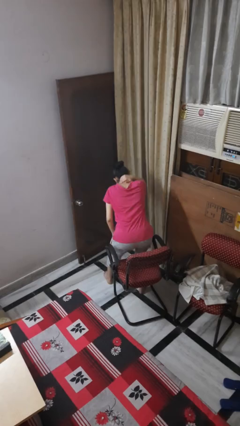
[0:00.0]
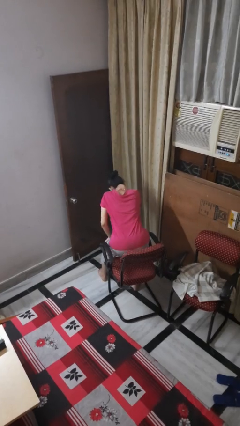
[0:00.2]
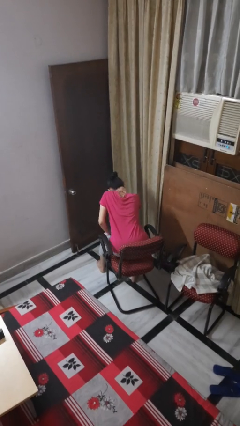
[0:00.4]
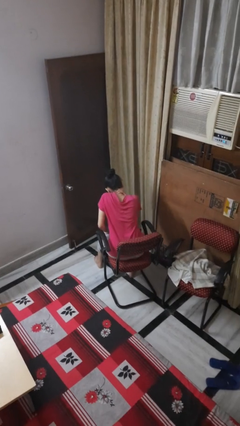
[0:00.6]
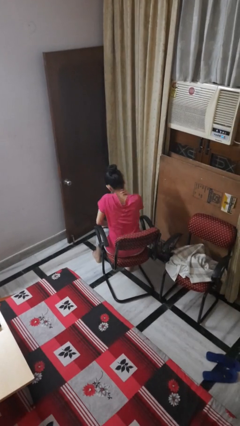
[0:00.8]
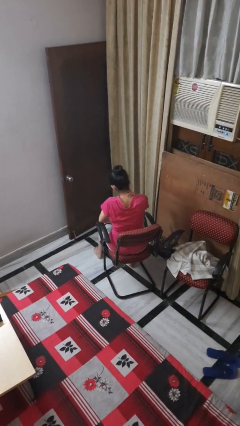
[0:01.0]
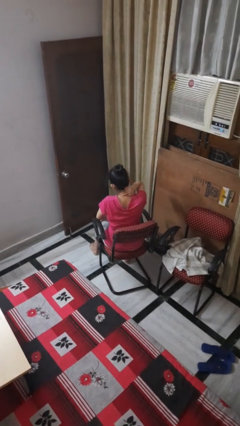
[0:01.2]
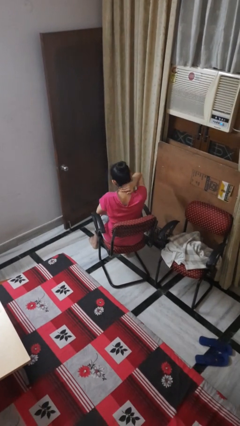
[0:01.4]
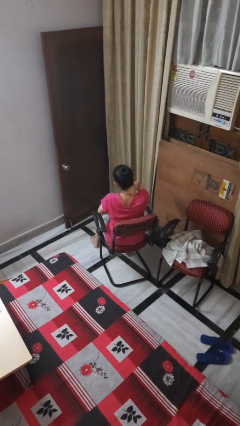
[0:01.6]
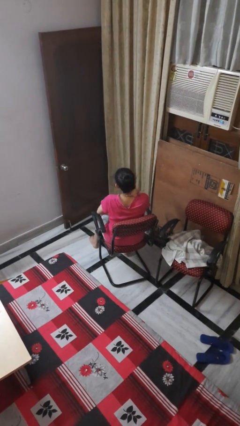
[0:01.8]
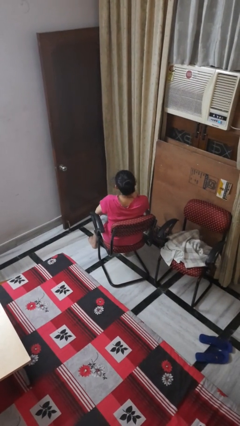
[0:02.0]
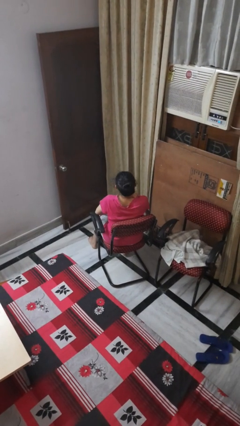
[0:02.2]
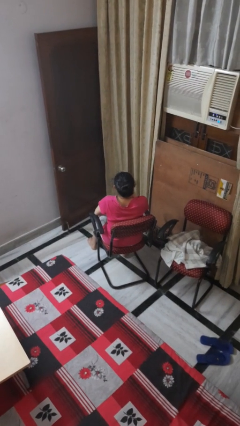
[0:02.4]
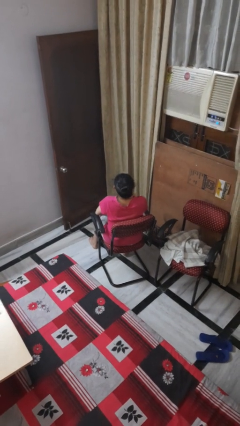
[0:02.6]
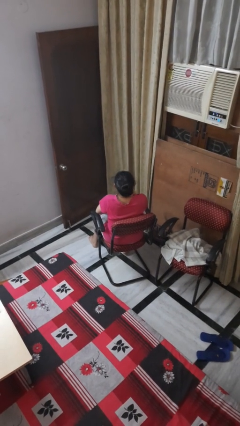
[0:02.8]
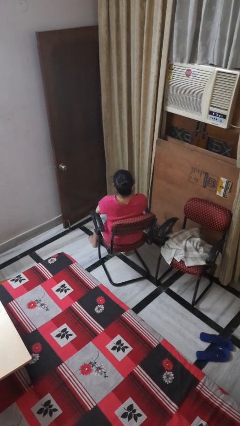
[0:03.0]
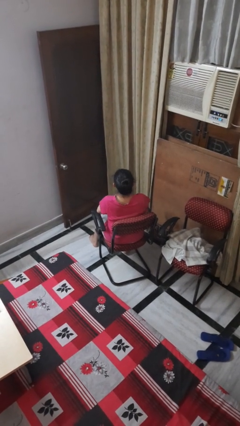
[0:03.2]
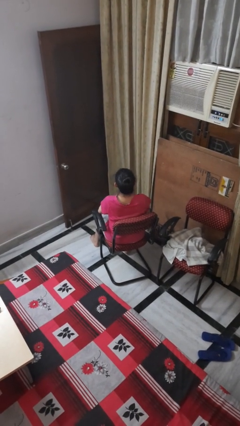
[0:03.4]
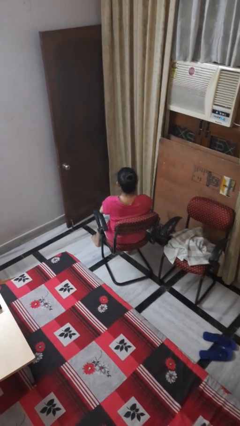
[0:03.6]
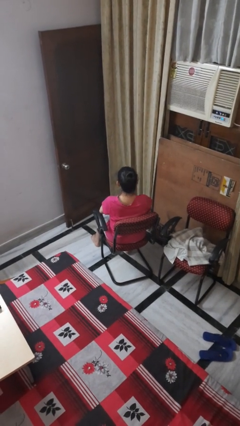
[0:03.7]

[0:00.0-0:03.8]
person rubs neck

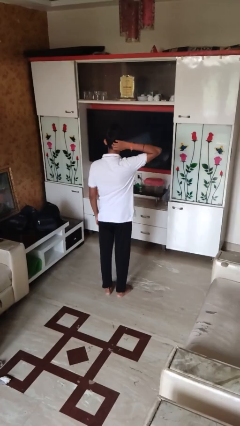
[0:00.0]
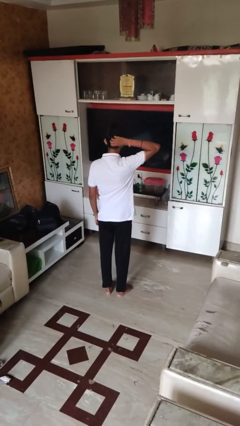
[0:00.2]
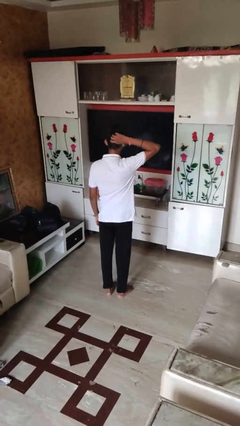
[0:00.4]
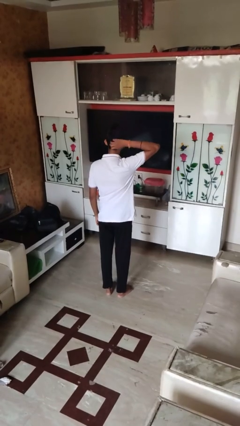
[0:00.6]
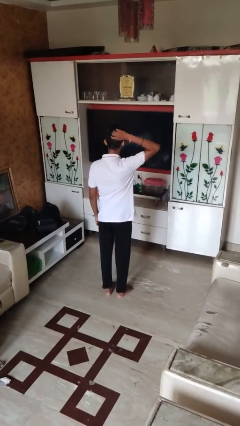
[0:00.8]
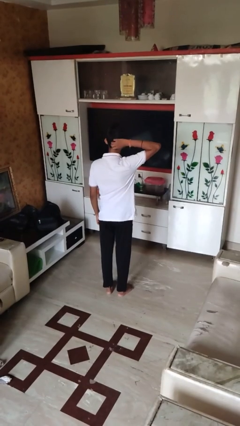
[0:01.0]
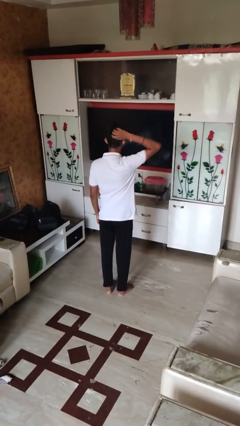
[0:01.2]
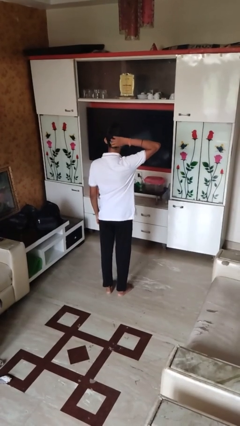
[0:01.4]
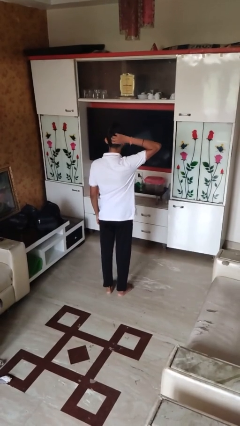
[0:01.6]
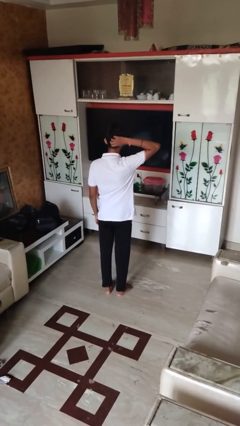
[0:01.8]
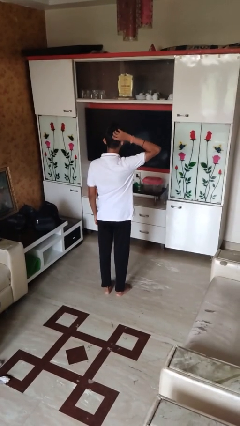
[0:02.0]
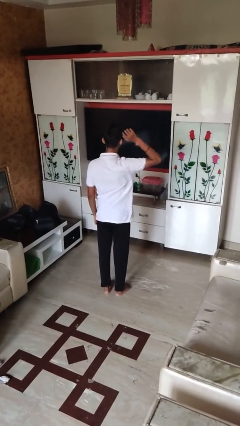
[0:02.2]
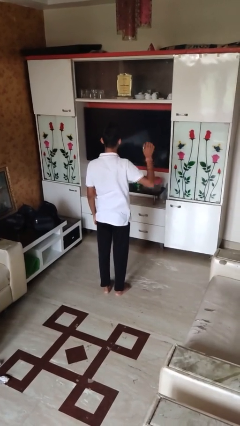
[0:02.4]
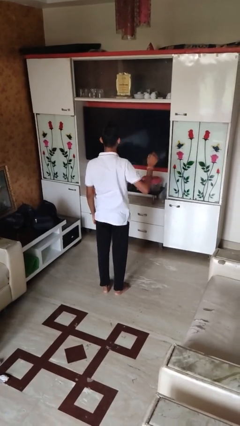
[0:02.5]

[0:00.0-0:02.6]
person scratches face

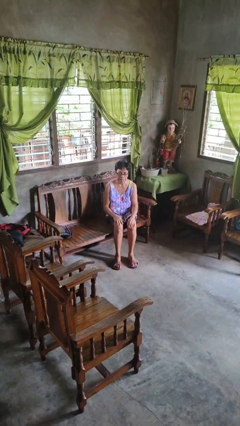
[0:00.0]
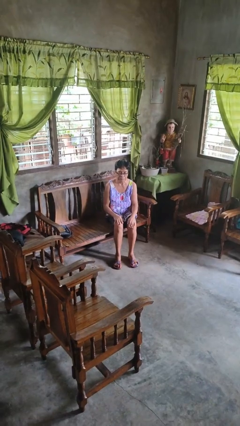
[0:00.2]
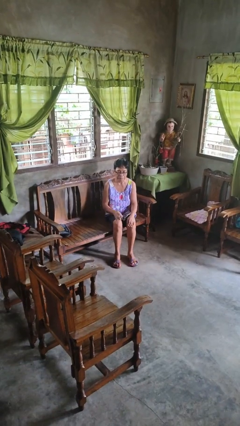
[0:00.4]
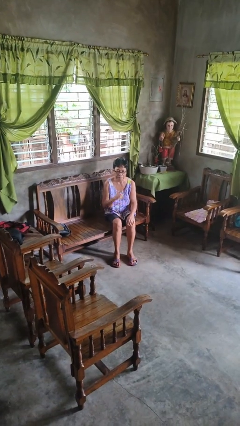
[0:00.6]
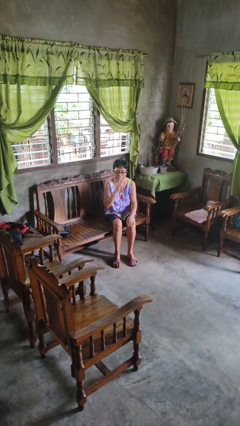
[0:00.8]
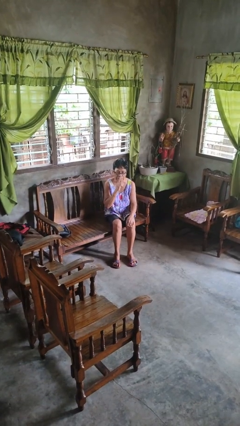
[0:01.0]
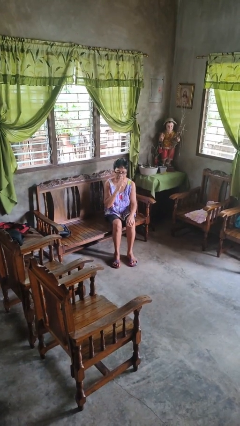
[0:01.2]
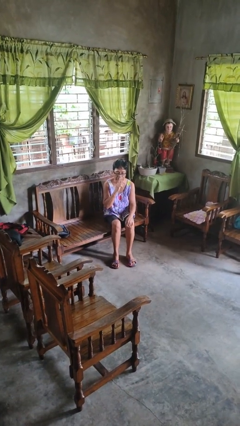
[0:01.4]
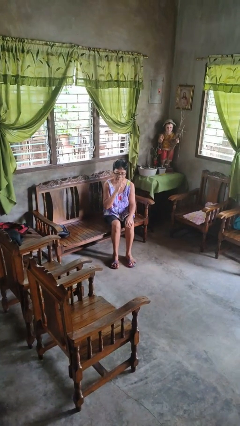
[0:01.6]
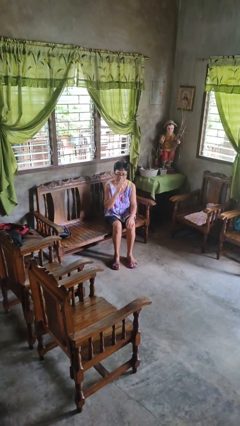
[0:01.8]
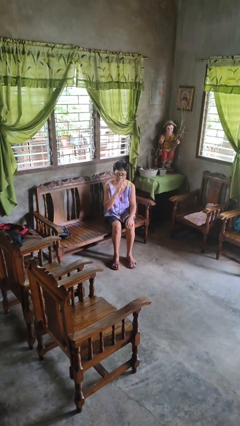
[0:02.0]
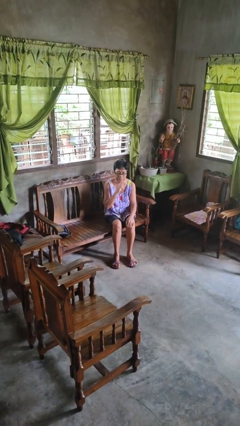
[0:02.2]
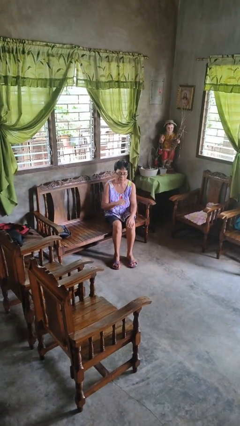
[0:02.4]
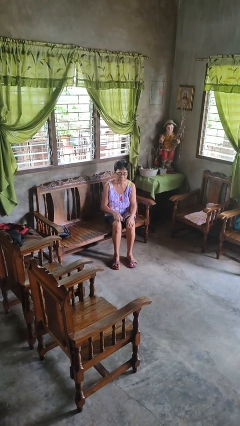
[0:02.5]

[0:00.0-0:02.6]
person gestures be quiet

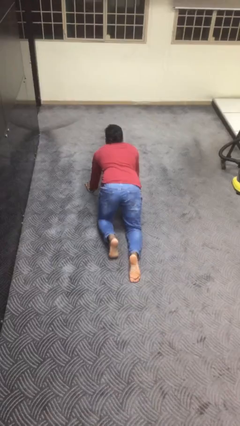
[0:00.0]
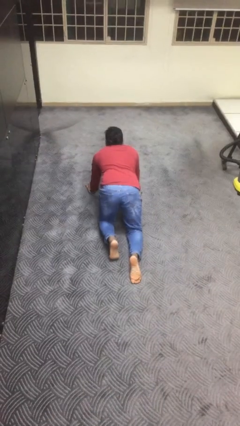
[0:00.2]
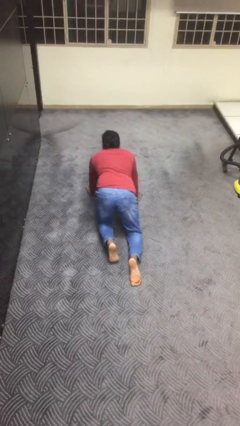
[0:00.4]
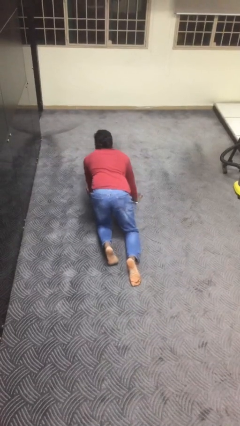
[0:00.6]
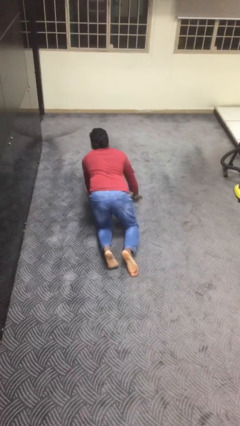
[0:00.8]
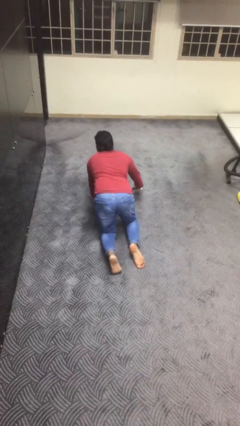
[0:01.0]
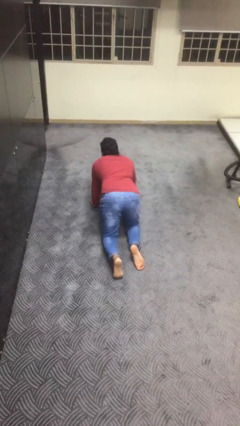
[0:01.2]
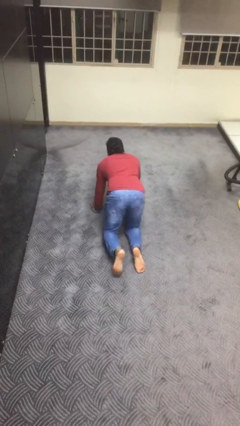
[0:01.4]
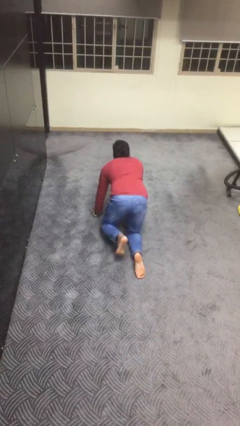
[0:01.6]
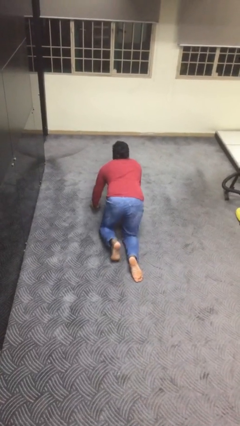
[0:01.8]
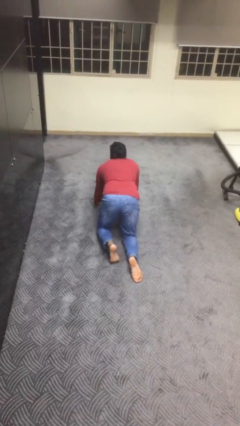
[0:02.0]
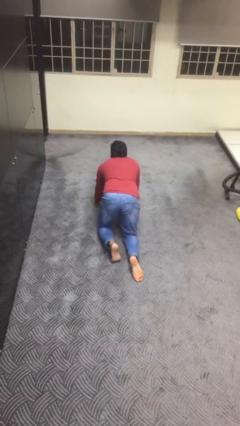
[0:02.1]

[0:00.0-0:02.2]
person crawls

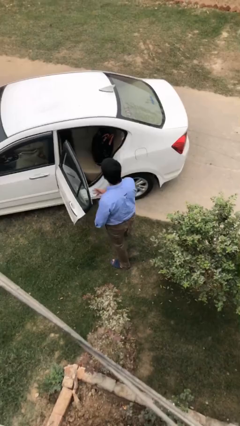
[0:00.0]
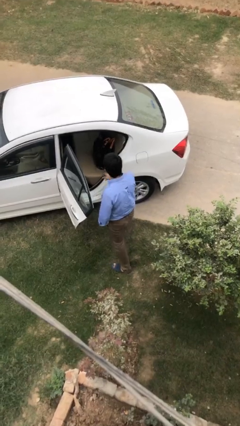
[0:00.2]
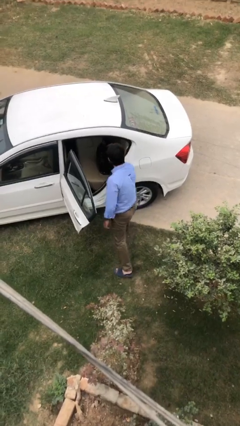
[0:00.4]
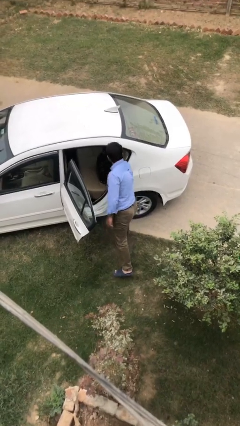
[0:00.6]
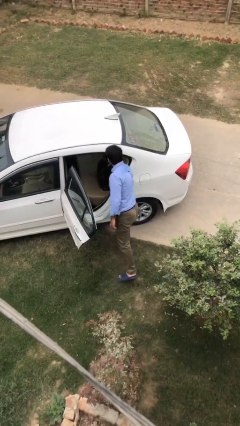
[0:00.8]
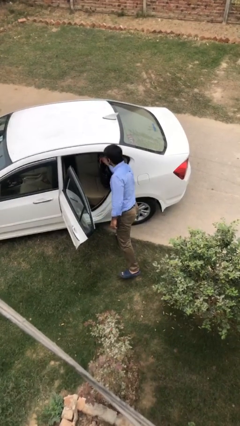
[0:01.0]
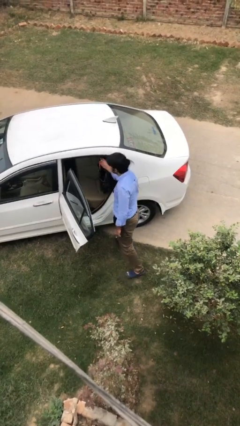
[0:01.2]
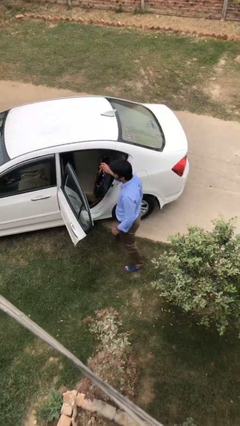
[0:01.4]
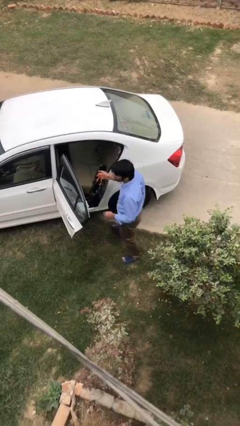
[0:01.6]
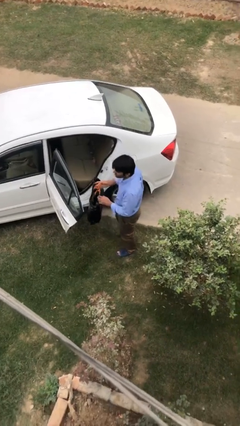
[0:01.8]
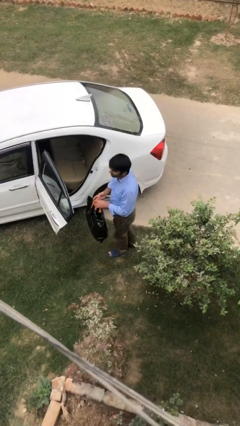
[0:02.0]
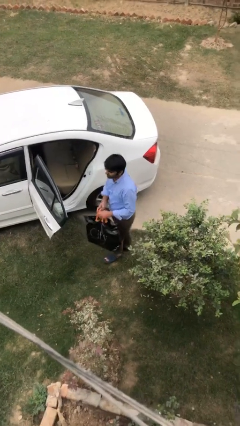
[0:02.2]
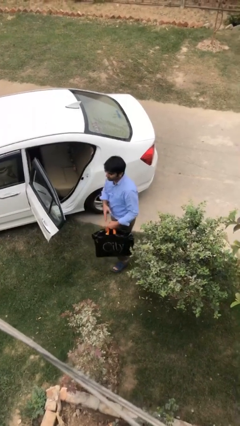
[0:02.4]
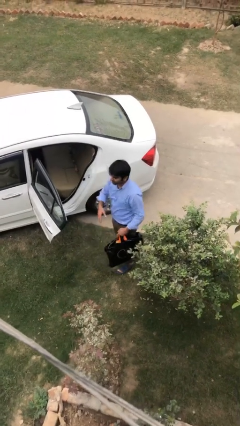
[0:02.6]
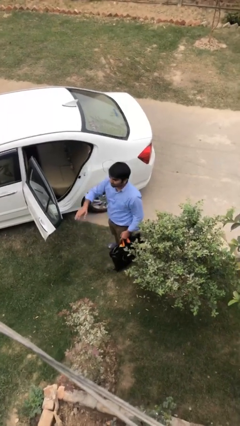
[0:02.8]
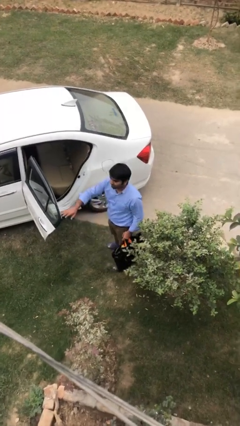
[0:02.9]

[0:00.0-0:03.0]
person unloads car

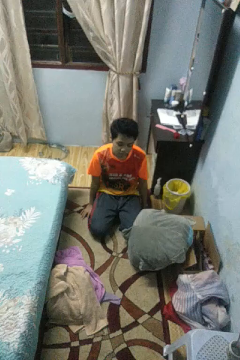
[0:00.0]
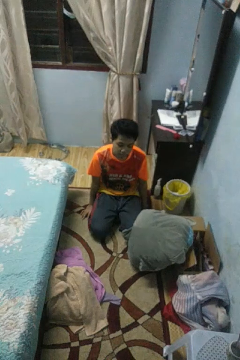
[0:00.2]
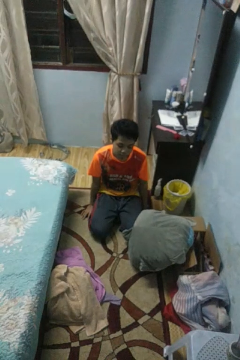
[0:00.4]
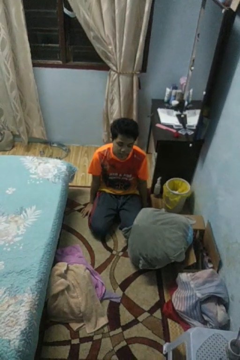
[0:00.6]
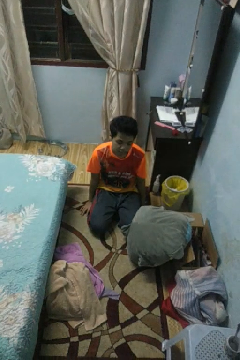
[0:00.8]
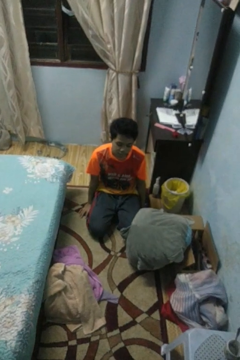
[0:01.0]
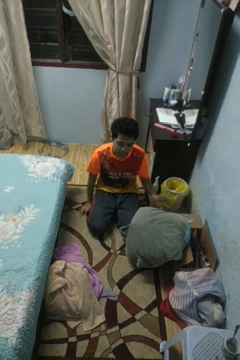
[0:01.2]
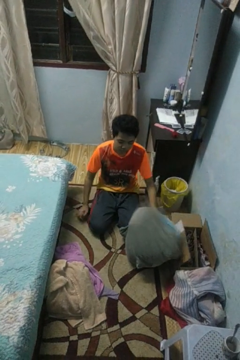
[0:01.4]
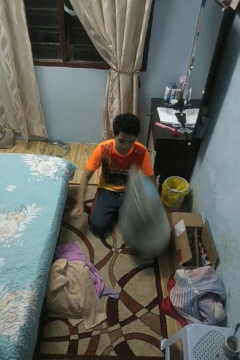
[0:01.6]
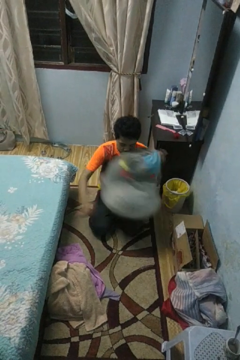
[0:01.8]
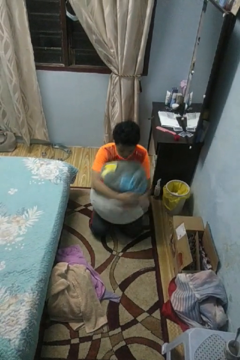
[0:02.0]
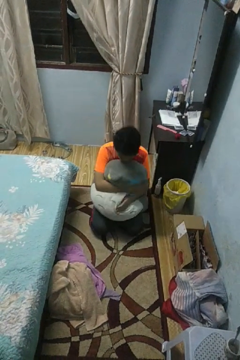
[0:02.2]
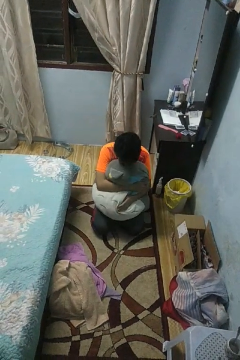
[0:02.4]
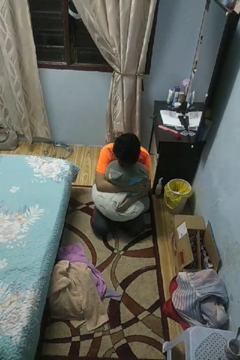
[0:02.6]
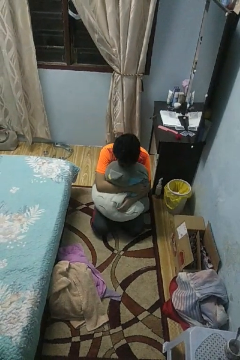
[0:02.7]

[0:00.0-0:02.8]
person hugs stuffed animal

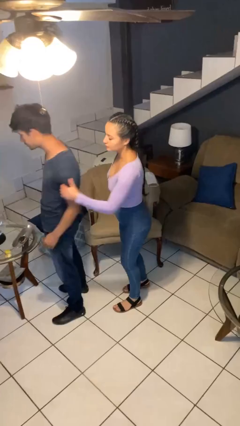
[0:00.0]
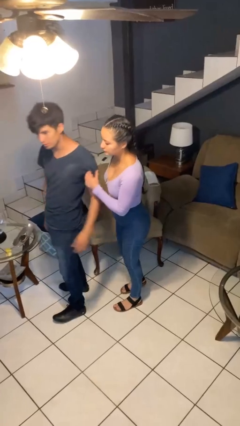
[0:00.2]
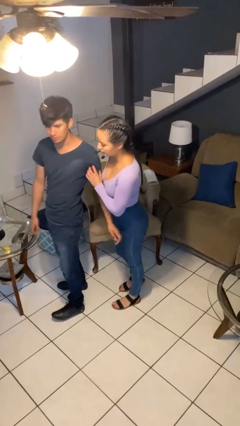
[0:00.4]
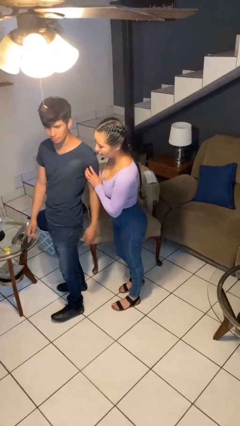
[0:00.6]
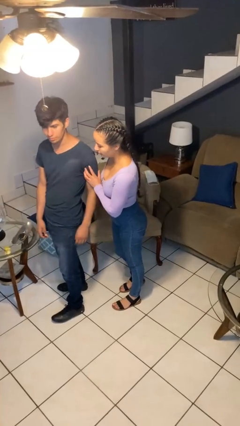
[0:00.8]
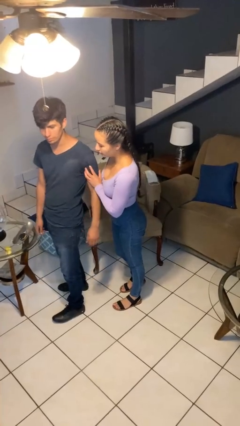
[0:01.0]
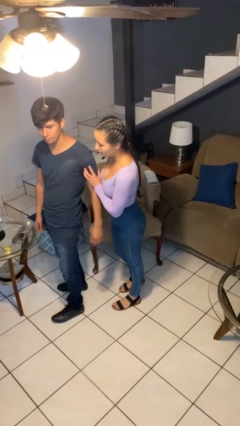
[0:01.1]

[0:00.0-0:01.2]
person grabs person by bicep
